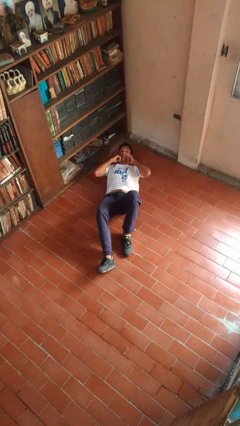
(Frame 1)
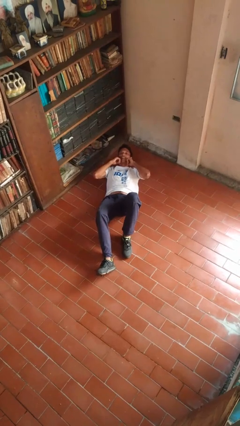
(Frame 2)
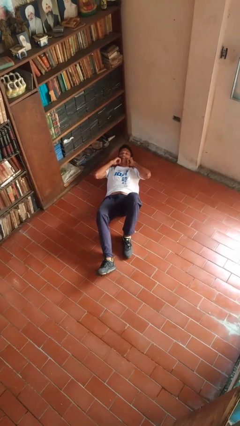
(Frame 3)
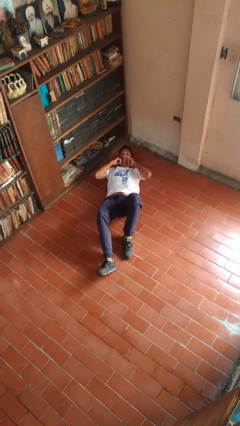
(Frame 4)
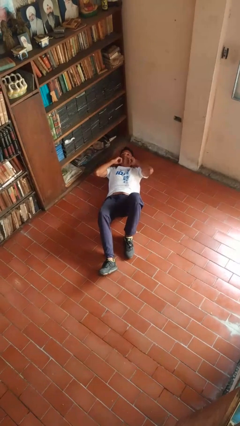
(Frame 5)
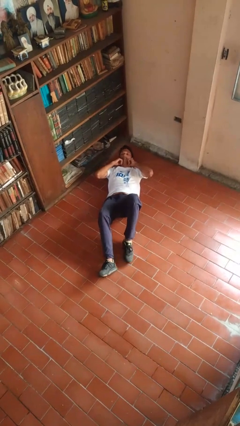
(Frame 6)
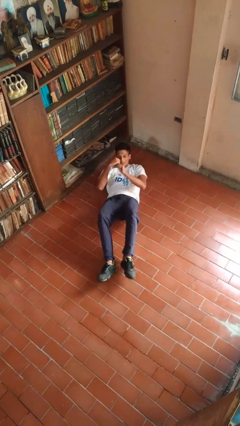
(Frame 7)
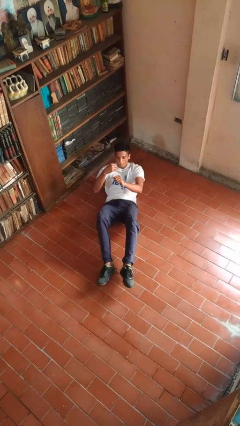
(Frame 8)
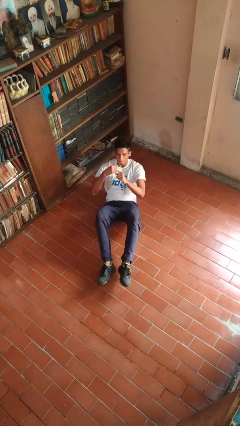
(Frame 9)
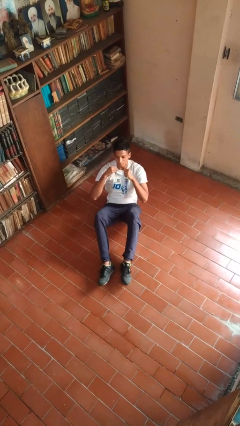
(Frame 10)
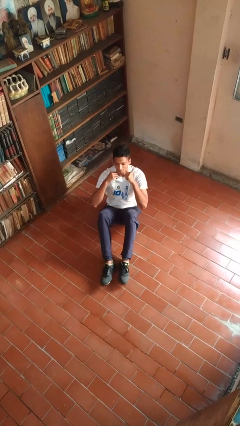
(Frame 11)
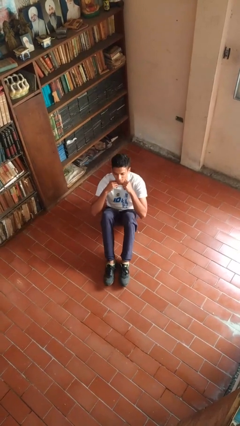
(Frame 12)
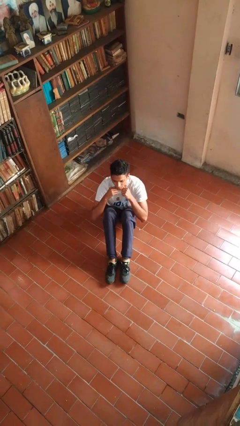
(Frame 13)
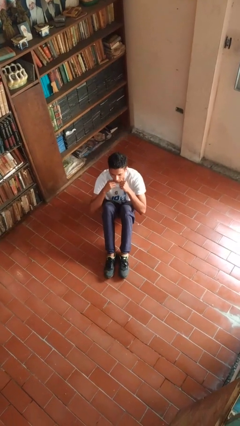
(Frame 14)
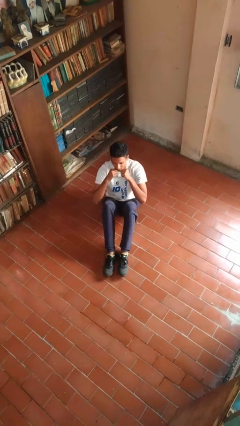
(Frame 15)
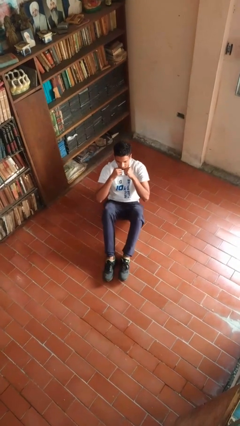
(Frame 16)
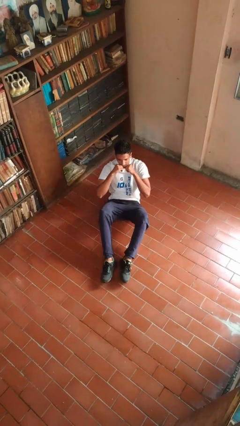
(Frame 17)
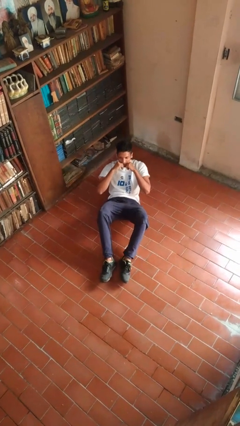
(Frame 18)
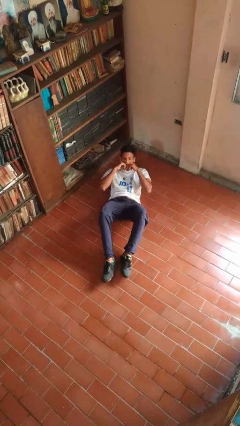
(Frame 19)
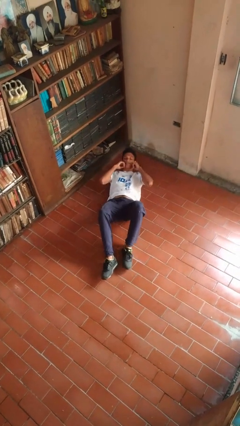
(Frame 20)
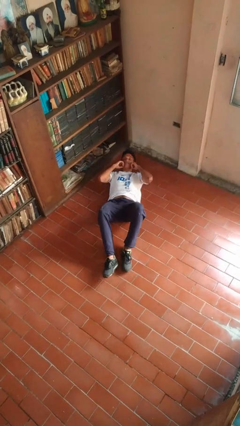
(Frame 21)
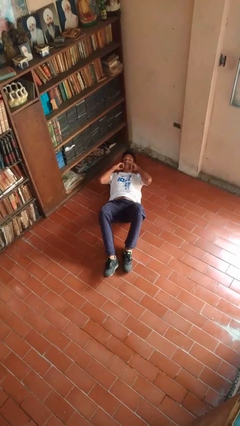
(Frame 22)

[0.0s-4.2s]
person exercises with situp

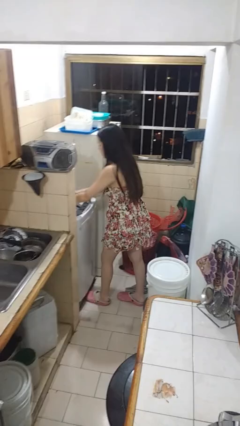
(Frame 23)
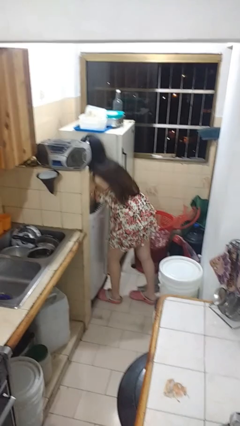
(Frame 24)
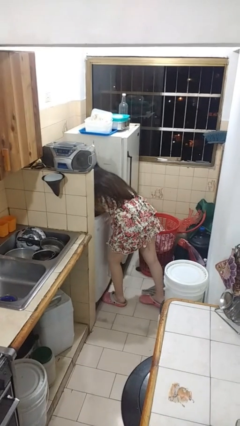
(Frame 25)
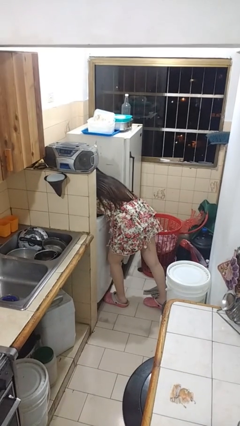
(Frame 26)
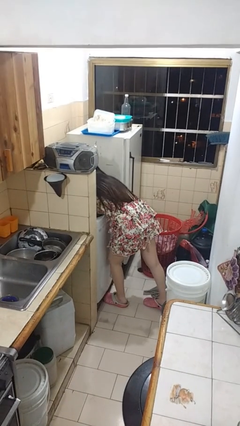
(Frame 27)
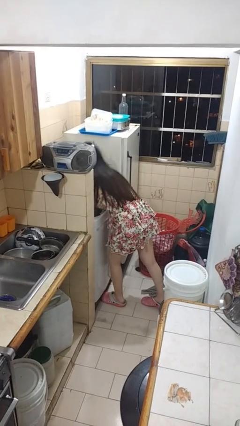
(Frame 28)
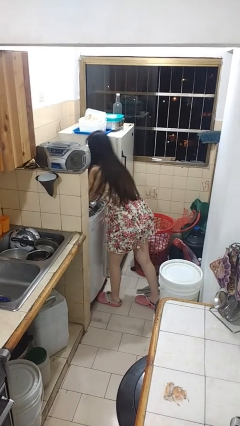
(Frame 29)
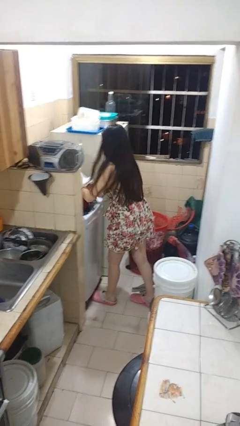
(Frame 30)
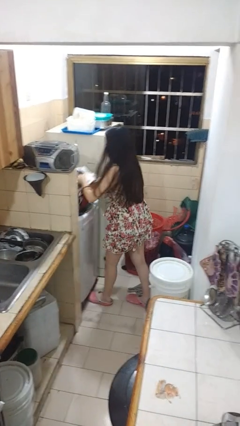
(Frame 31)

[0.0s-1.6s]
person unloads clotheswasher

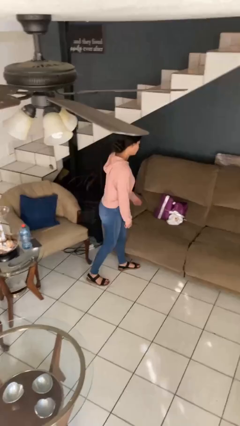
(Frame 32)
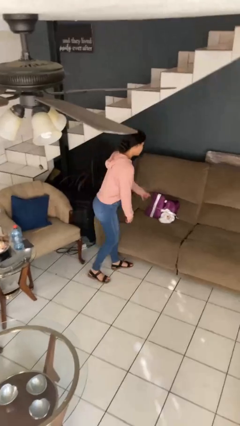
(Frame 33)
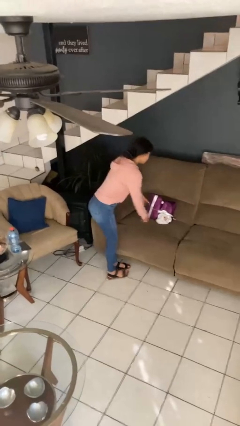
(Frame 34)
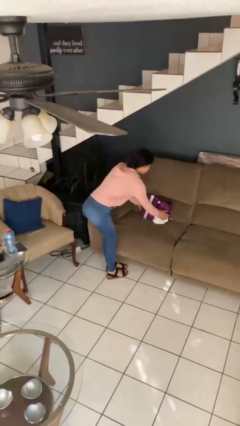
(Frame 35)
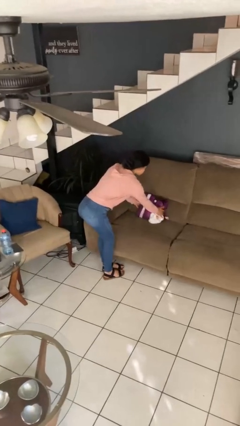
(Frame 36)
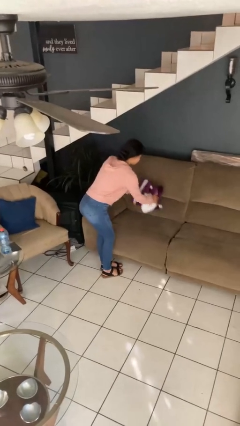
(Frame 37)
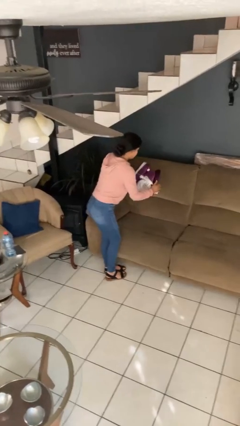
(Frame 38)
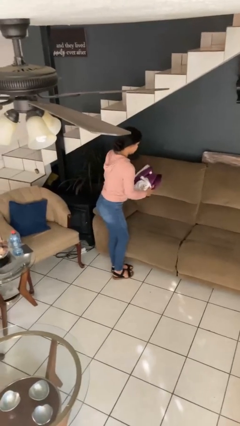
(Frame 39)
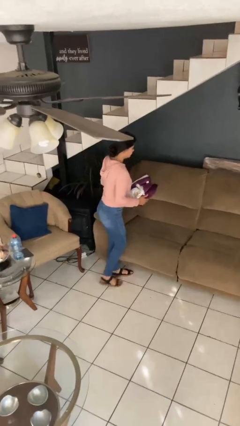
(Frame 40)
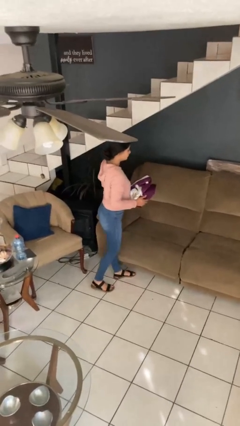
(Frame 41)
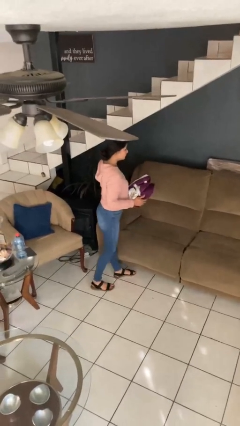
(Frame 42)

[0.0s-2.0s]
person picks up object from couch

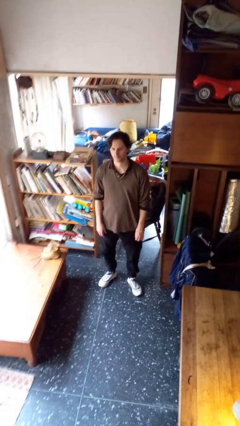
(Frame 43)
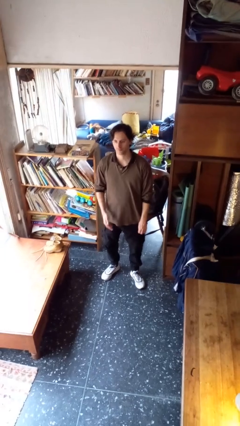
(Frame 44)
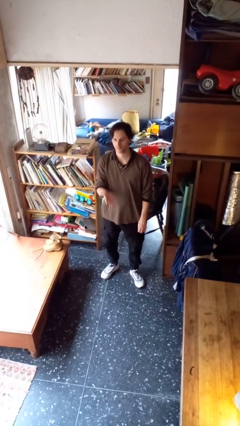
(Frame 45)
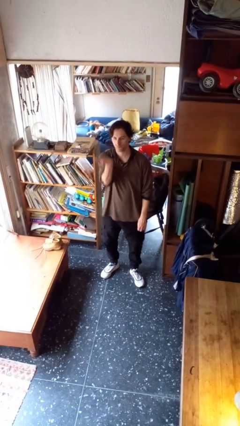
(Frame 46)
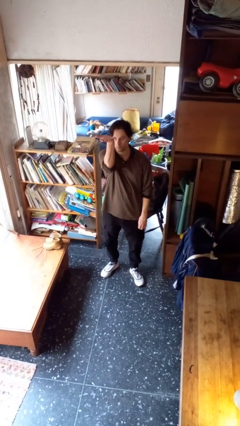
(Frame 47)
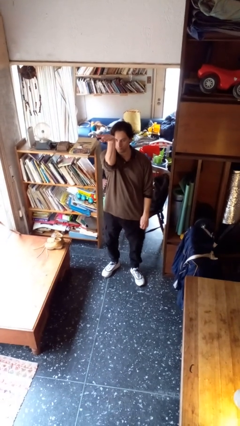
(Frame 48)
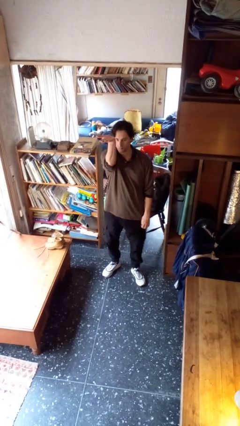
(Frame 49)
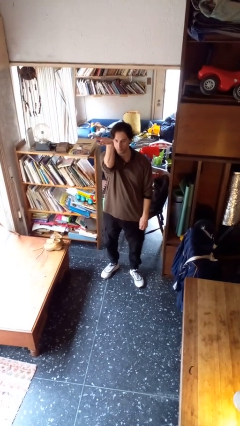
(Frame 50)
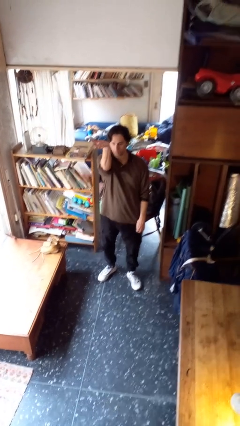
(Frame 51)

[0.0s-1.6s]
person gestures swipe up

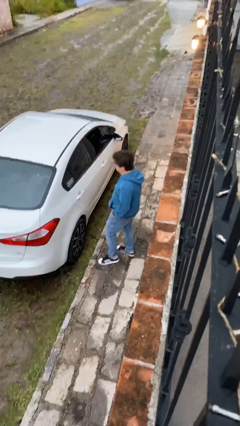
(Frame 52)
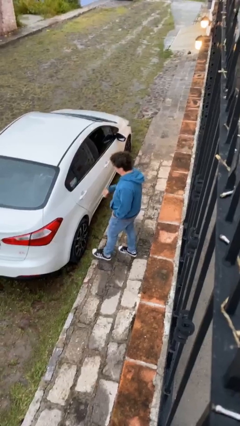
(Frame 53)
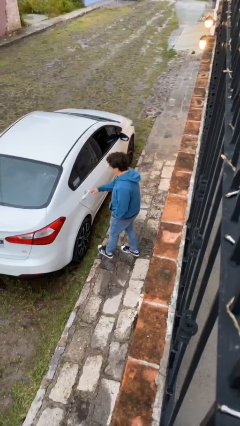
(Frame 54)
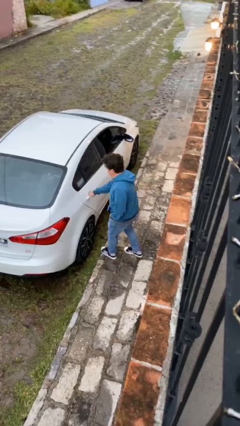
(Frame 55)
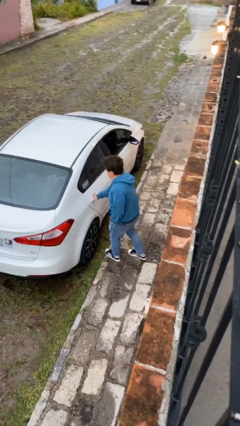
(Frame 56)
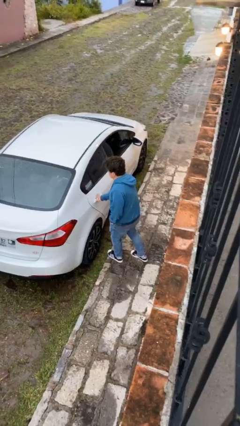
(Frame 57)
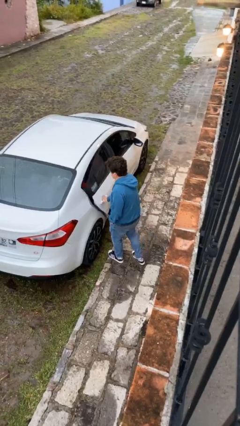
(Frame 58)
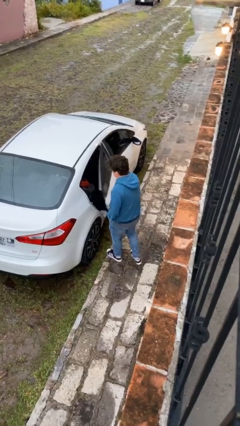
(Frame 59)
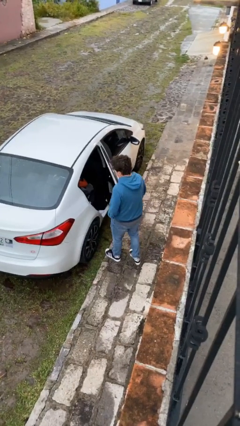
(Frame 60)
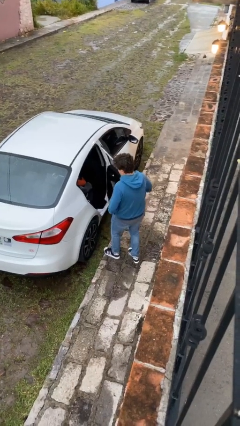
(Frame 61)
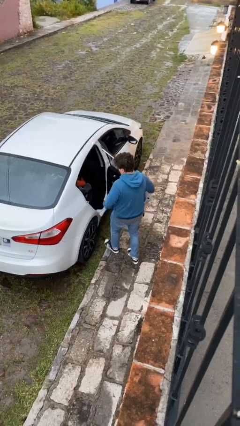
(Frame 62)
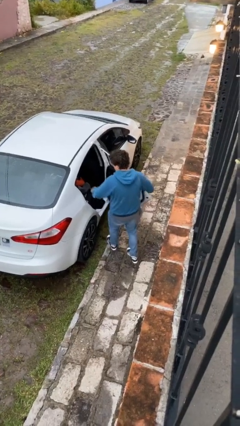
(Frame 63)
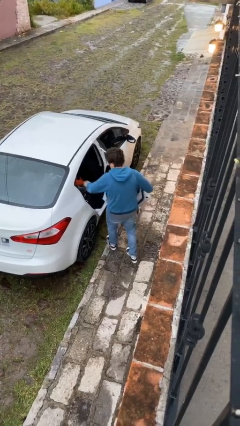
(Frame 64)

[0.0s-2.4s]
person opens car door

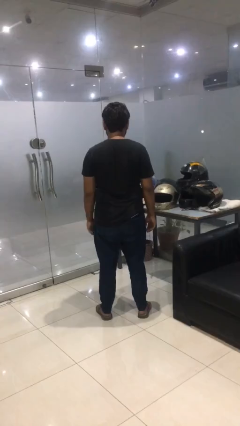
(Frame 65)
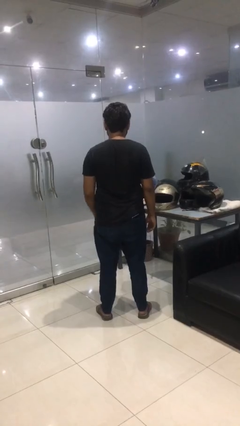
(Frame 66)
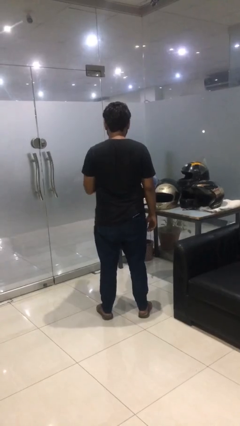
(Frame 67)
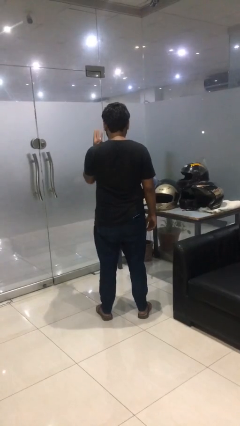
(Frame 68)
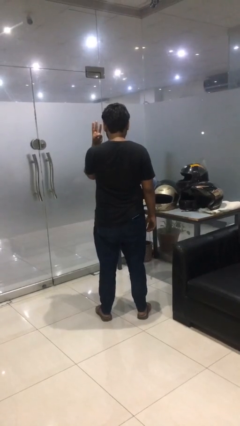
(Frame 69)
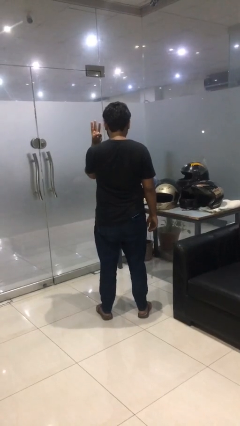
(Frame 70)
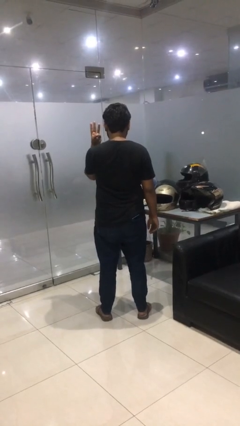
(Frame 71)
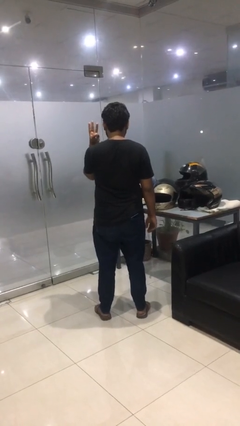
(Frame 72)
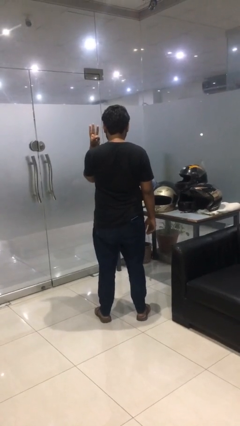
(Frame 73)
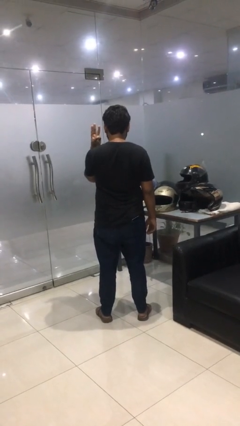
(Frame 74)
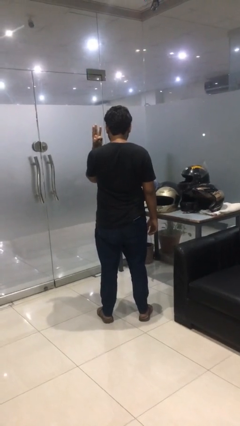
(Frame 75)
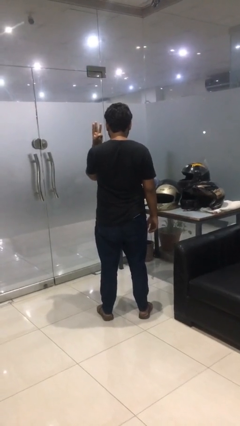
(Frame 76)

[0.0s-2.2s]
person gestures number three

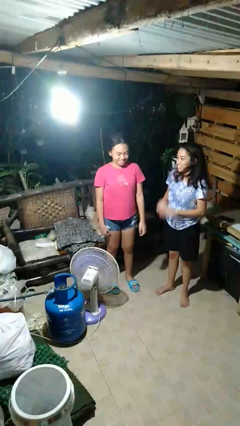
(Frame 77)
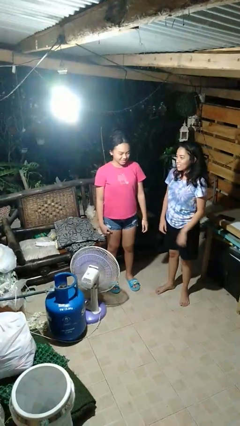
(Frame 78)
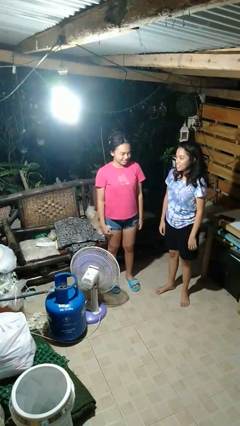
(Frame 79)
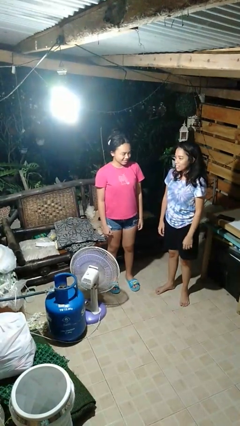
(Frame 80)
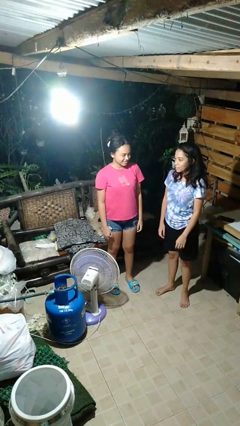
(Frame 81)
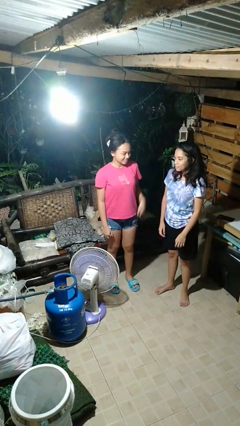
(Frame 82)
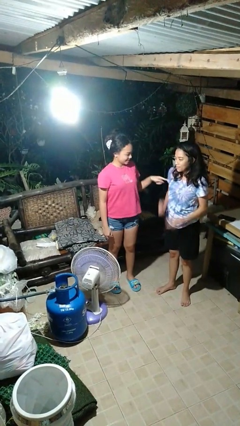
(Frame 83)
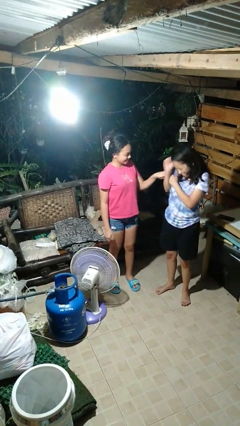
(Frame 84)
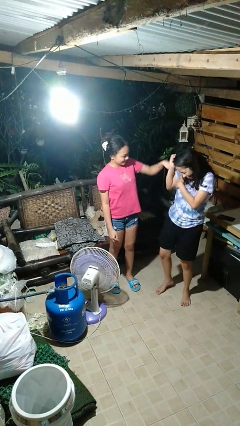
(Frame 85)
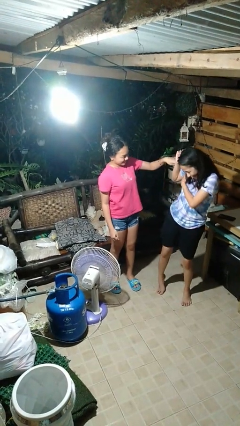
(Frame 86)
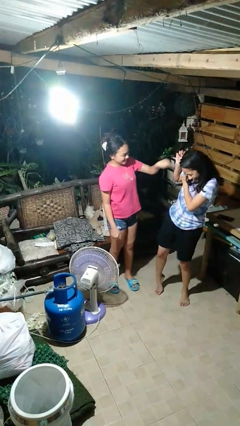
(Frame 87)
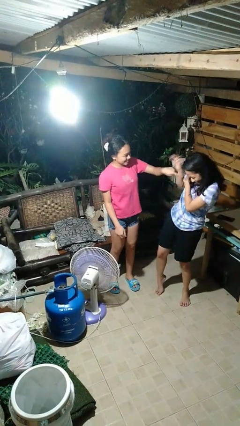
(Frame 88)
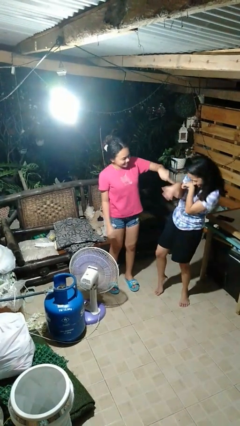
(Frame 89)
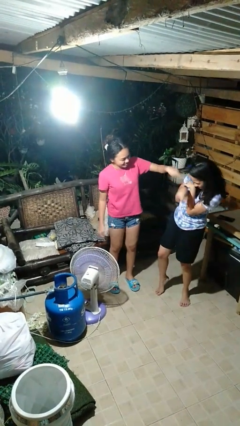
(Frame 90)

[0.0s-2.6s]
person tickles person

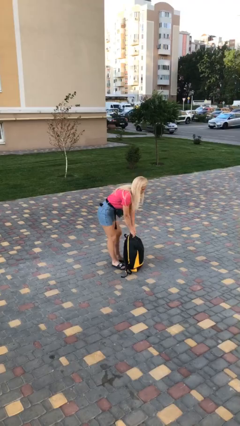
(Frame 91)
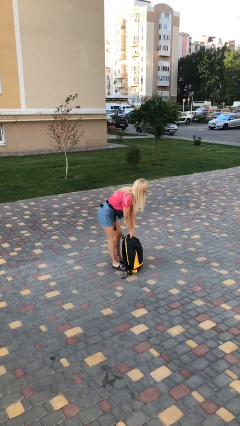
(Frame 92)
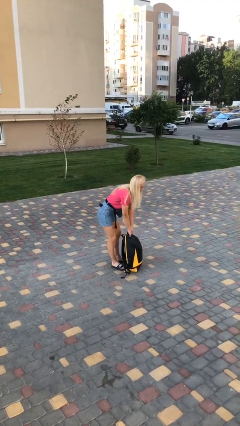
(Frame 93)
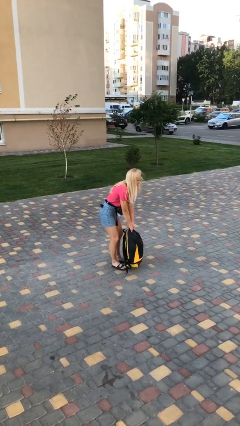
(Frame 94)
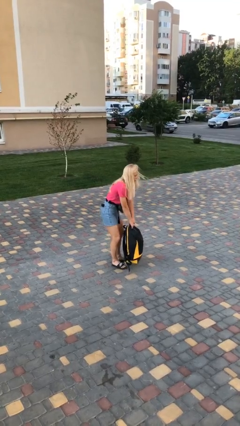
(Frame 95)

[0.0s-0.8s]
person picks up object from floor
